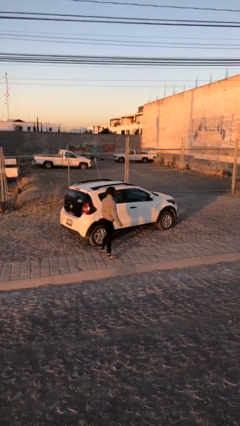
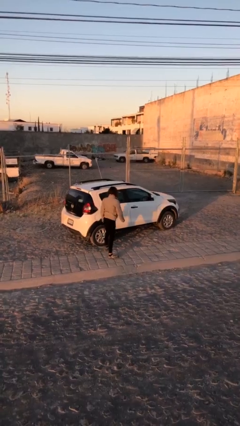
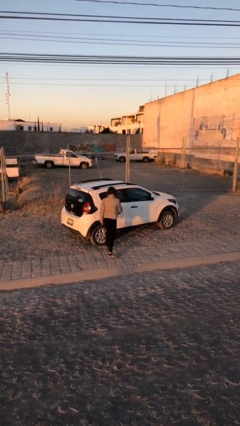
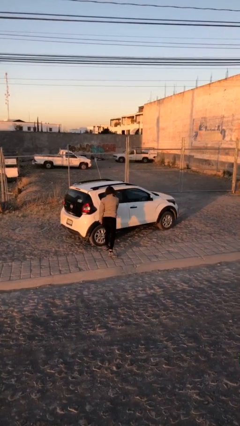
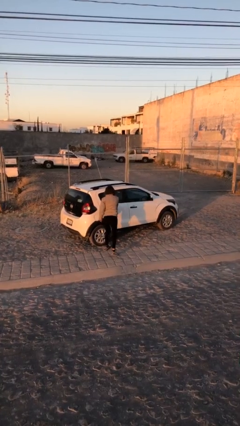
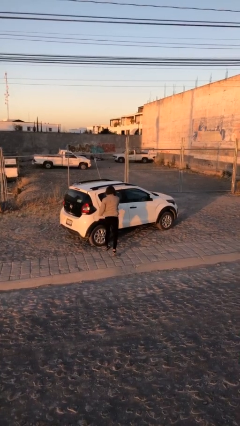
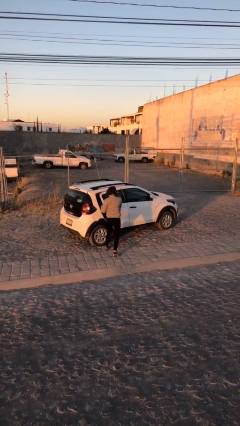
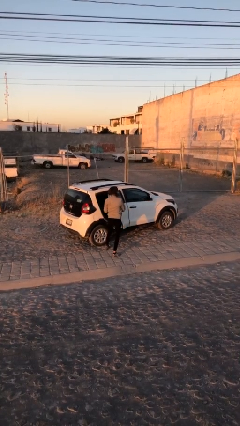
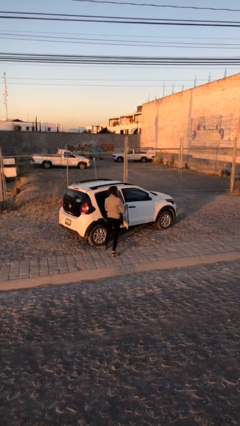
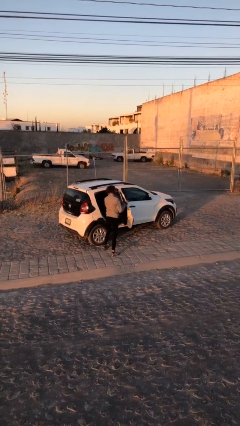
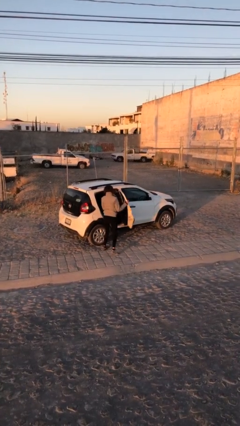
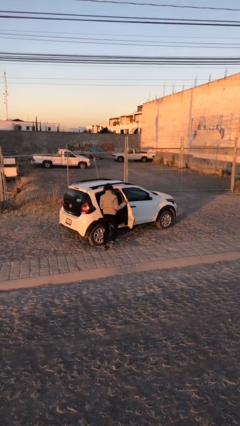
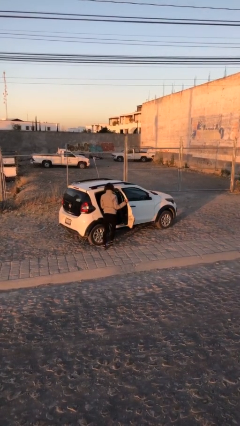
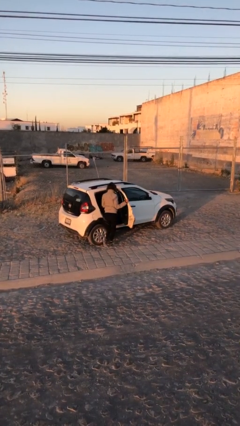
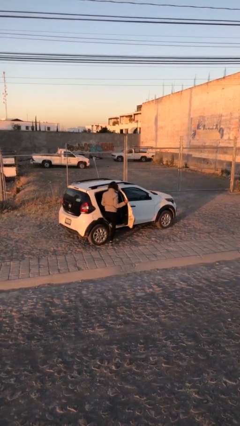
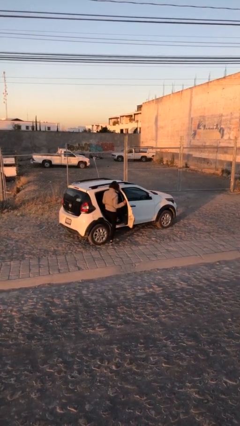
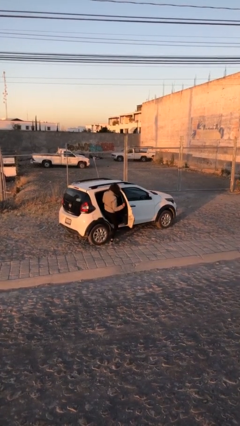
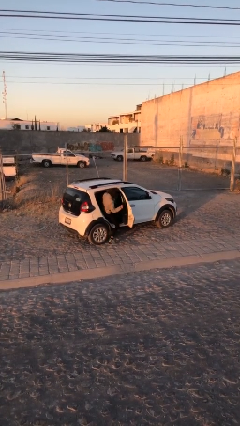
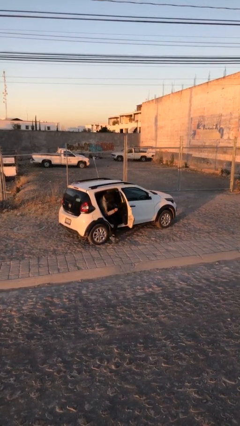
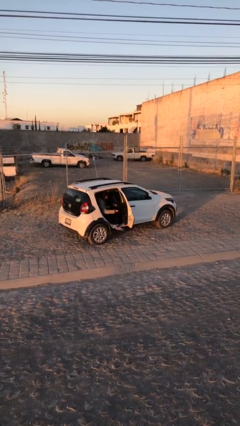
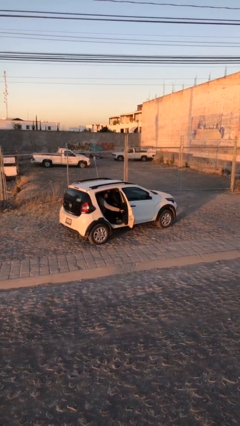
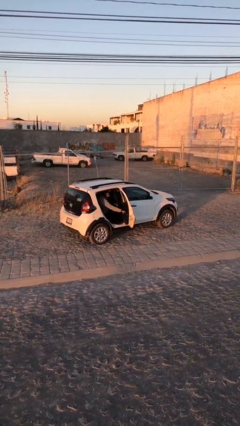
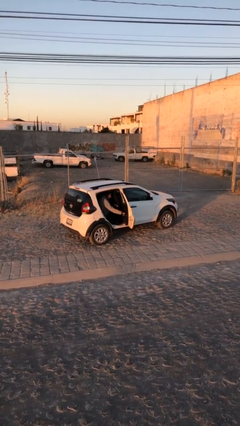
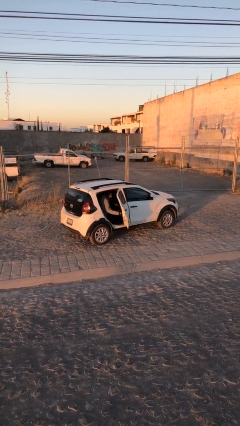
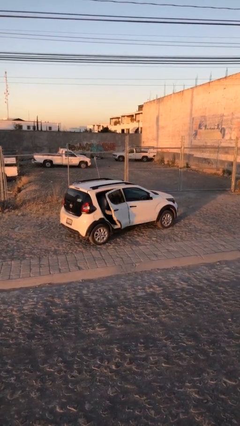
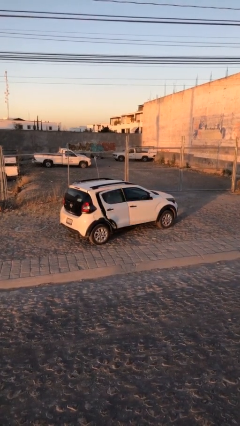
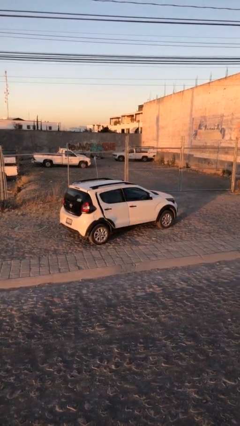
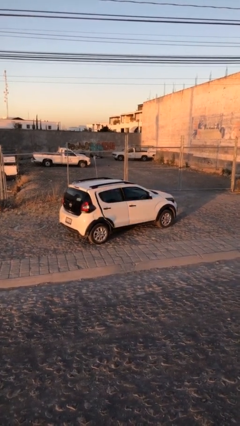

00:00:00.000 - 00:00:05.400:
car picks up person

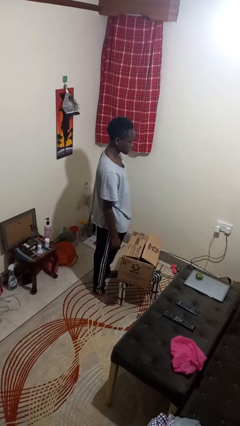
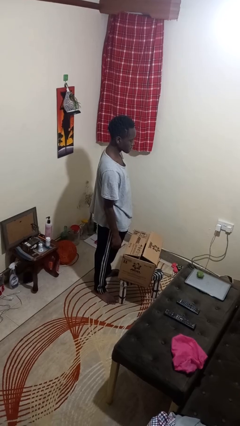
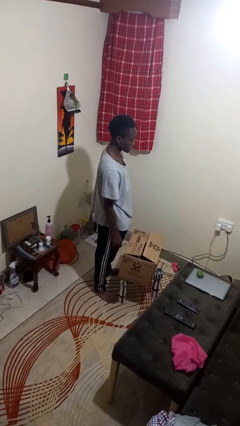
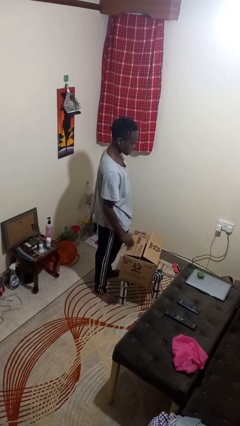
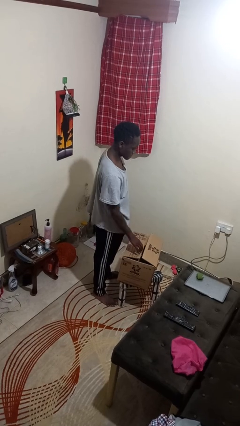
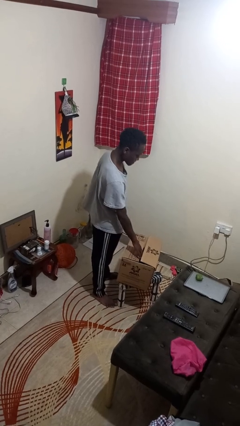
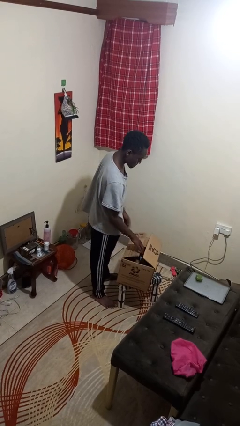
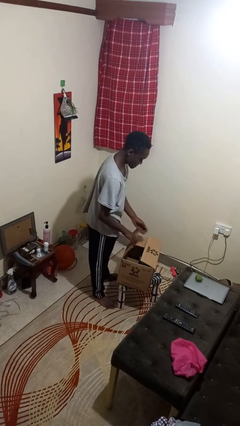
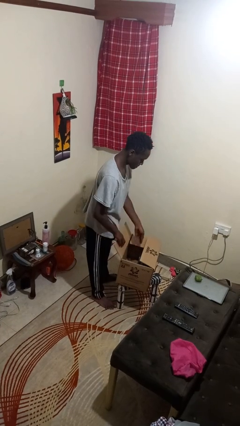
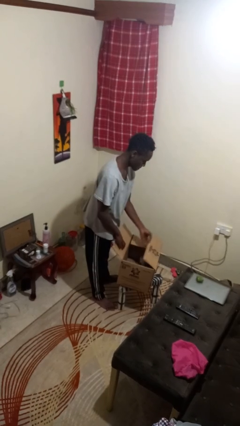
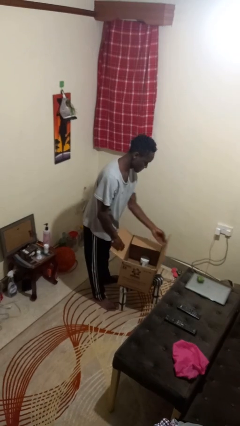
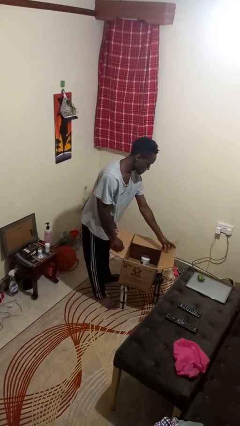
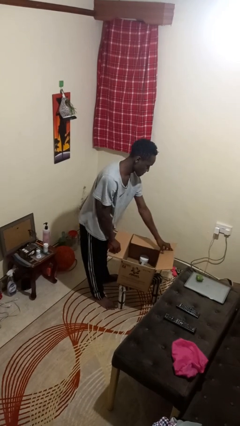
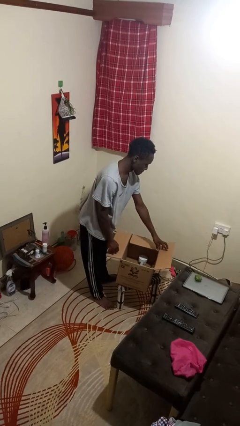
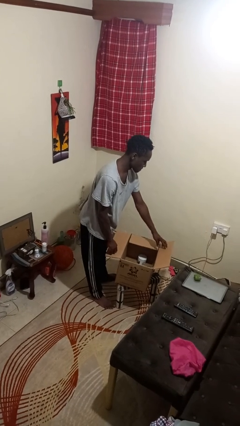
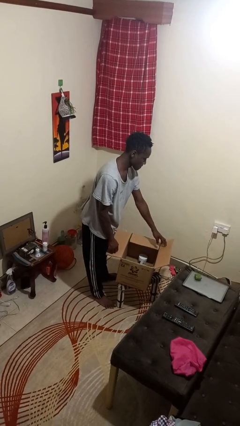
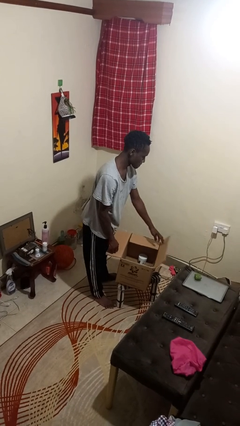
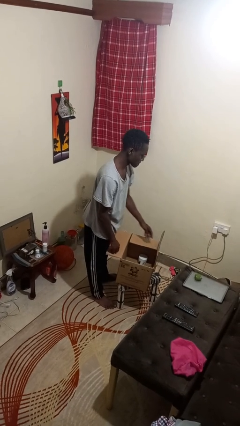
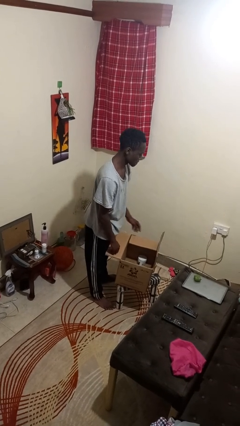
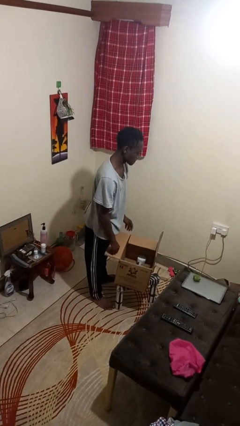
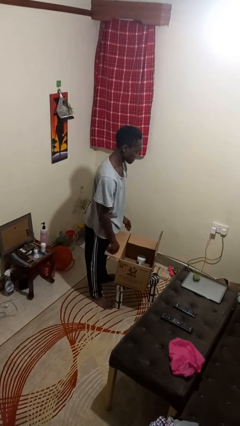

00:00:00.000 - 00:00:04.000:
person opens box

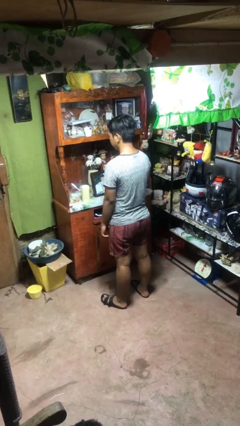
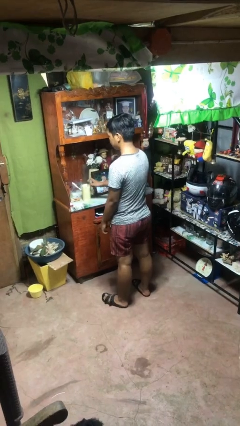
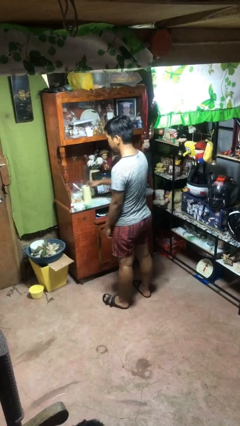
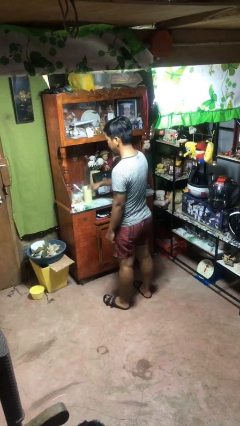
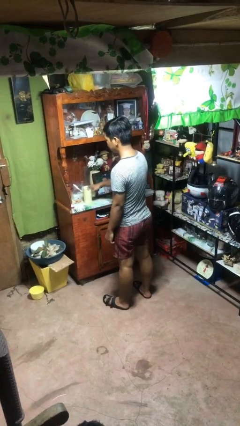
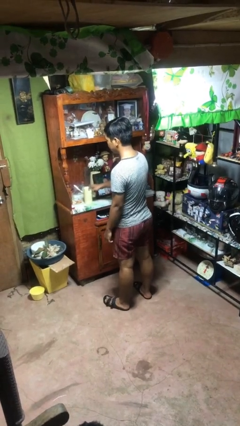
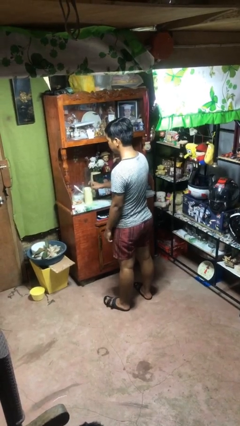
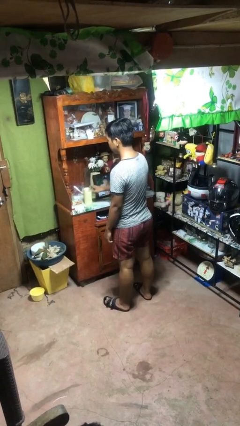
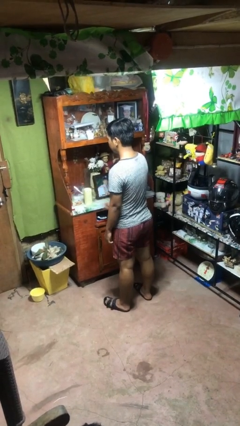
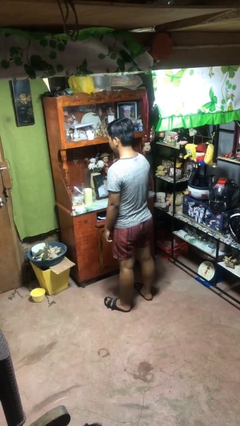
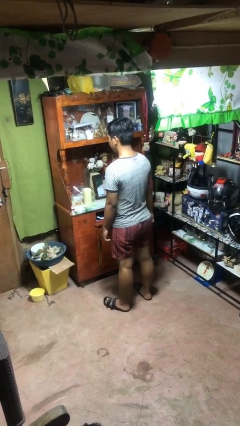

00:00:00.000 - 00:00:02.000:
person taps object with finger

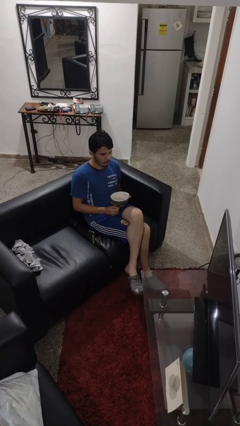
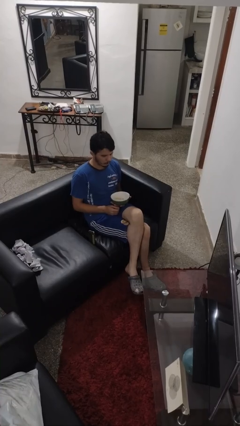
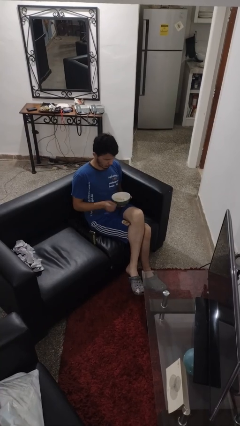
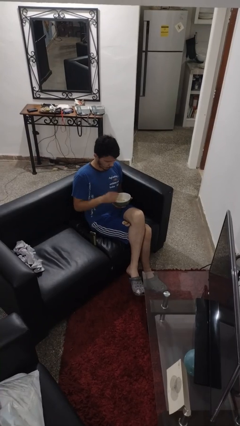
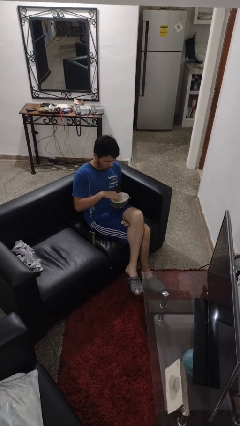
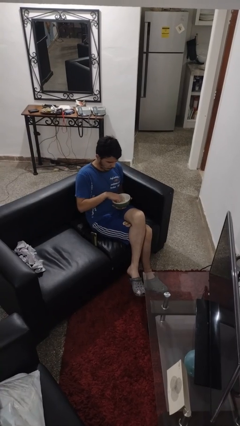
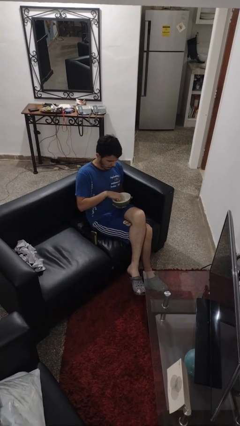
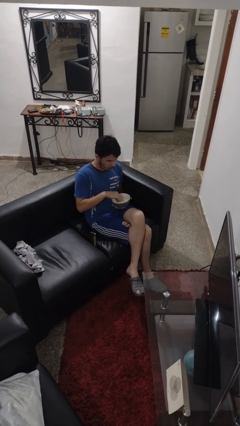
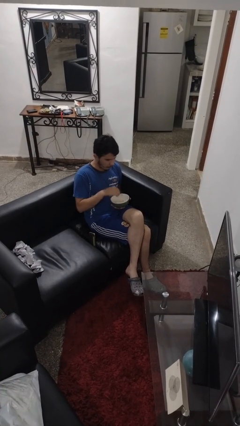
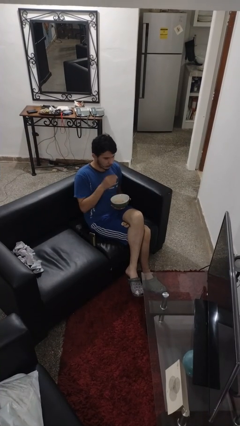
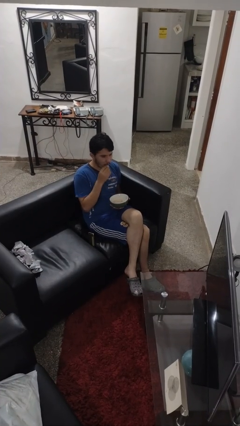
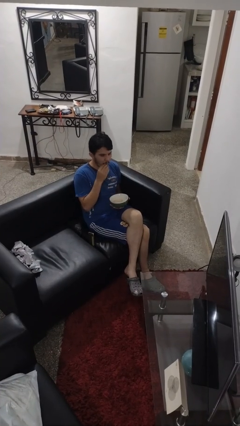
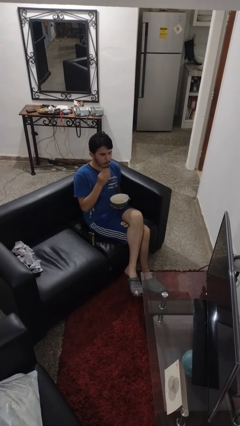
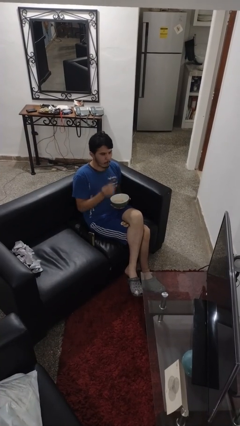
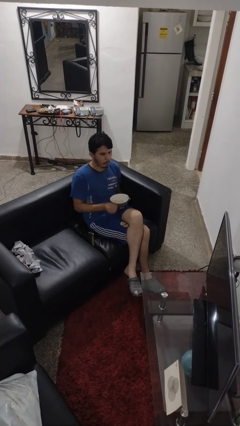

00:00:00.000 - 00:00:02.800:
person eats with hands

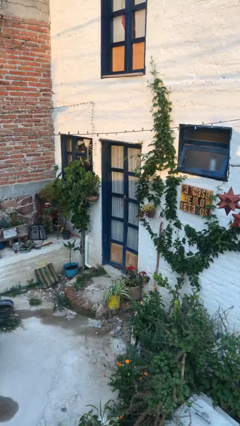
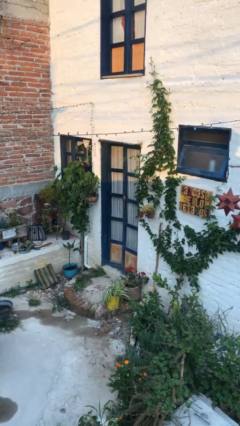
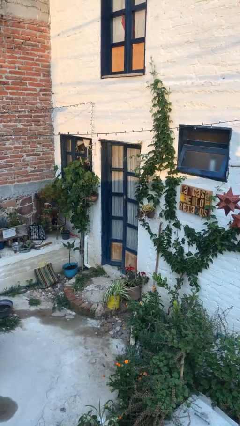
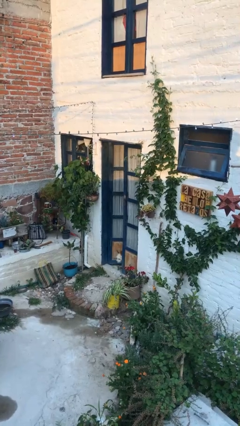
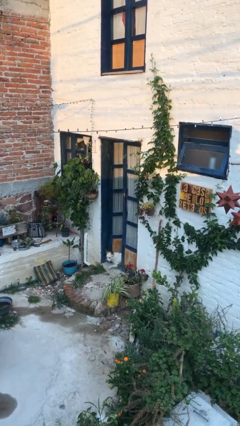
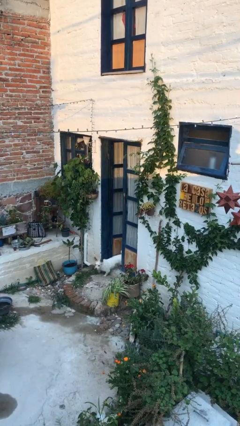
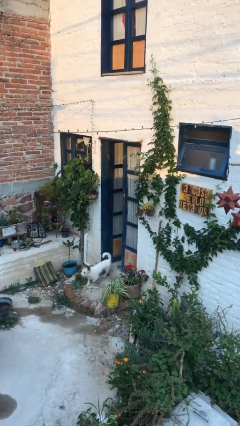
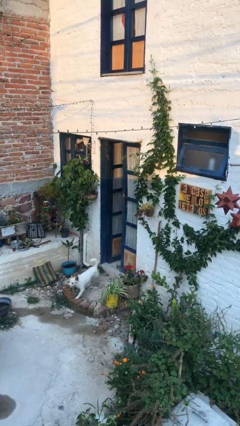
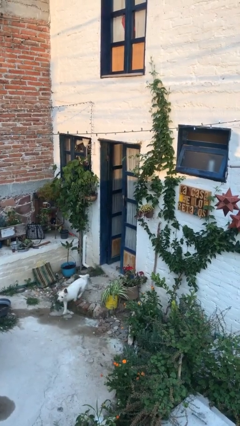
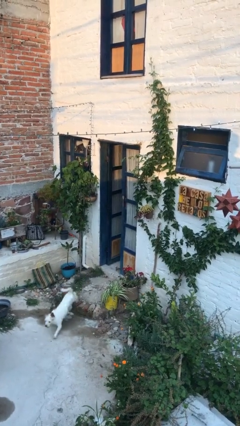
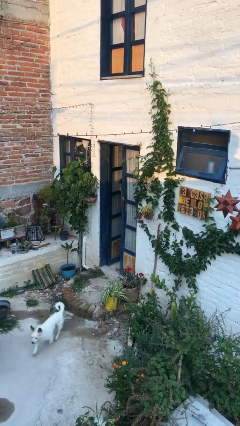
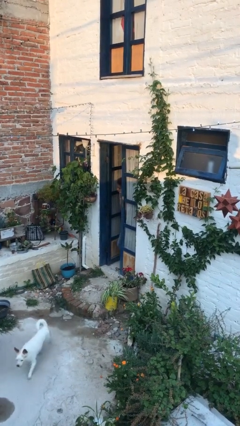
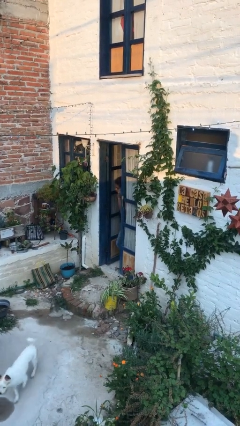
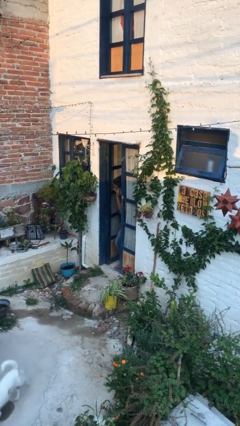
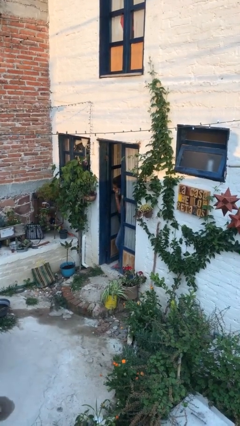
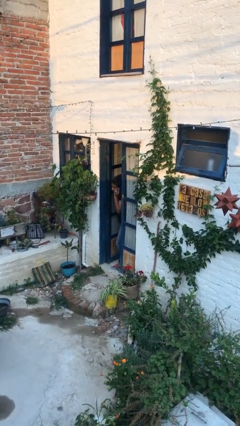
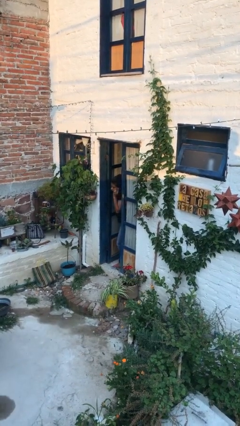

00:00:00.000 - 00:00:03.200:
person opens facility door
